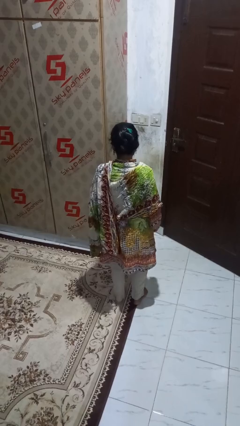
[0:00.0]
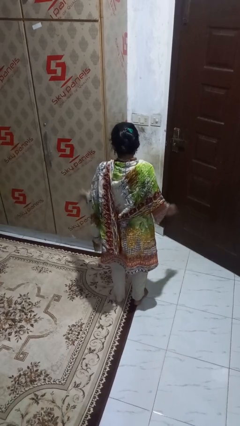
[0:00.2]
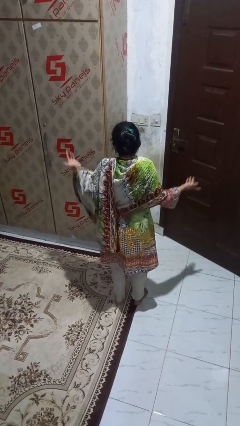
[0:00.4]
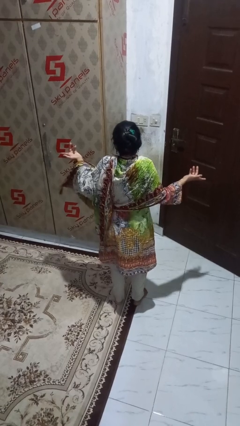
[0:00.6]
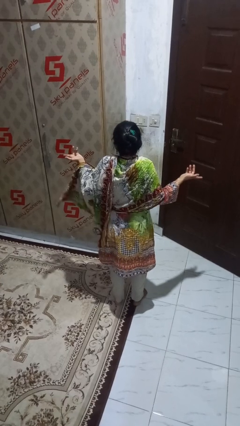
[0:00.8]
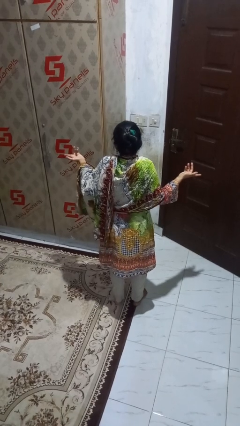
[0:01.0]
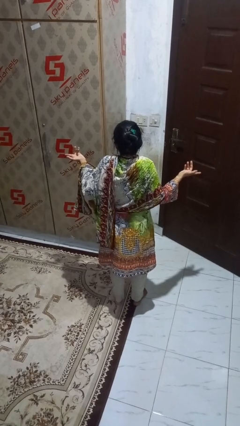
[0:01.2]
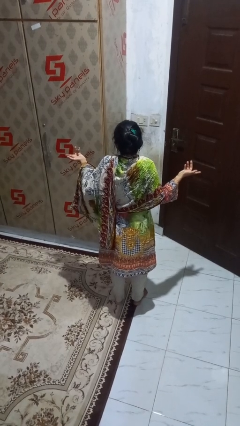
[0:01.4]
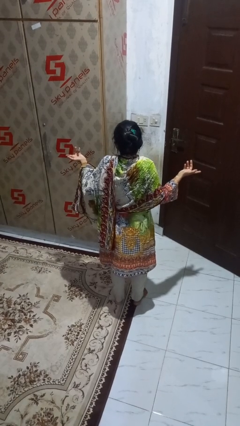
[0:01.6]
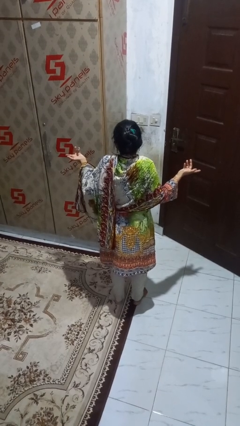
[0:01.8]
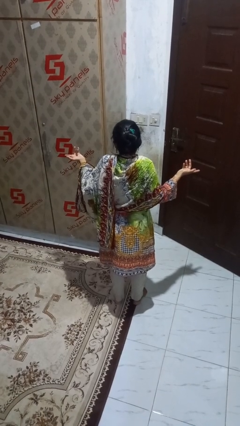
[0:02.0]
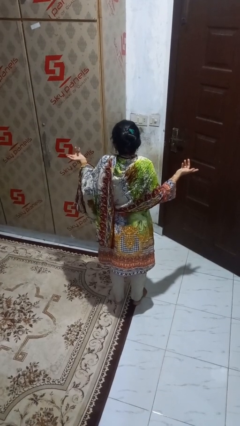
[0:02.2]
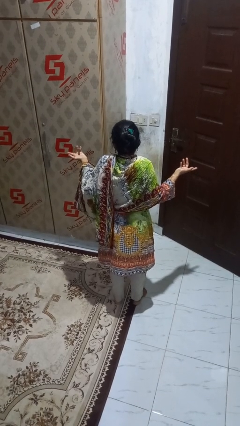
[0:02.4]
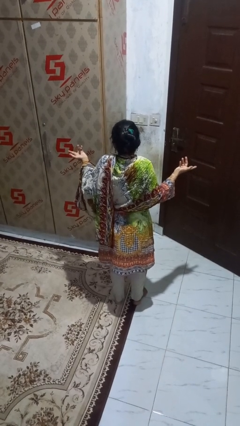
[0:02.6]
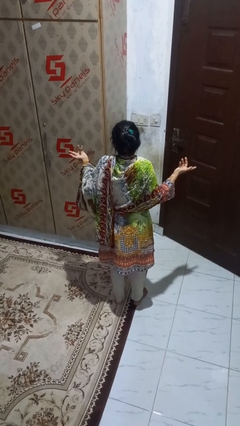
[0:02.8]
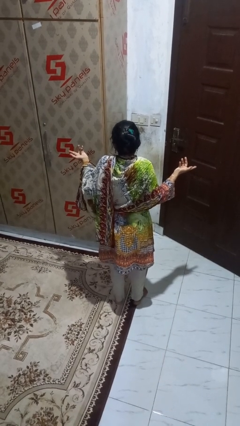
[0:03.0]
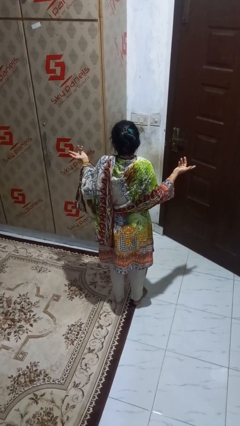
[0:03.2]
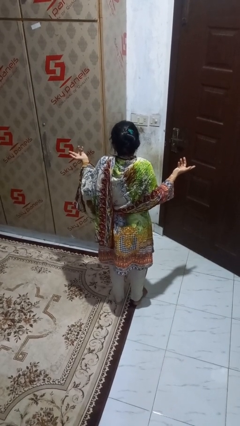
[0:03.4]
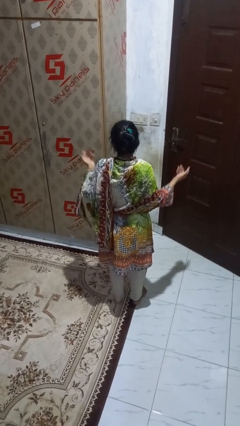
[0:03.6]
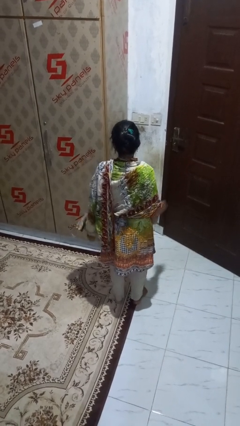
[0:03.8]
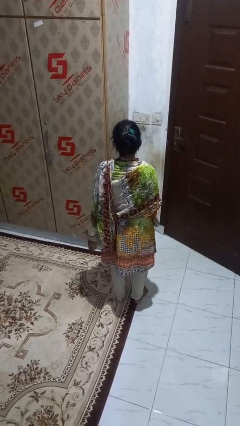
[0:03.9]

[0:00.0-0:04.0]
person shrugs

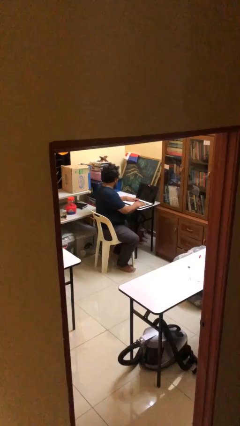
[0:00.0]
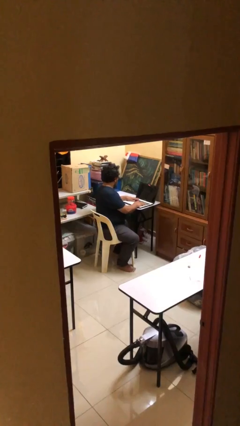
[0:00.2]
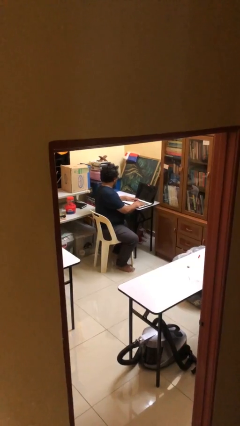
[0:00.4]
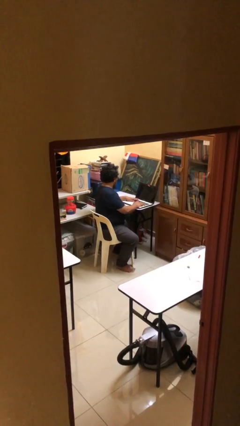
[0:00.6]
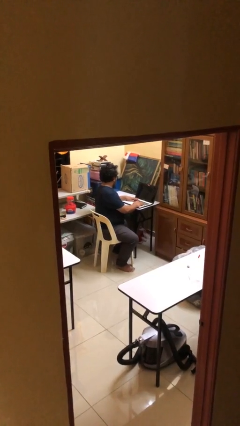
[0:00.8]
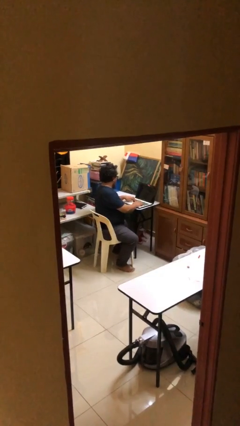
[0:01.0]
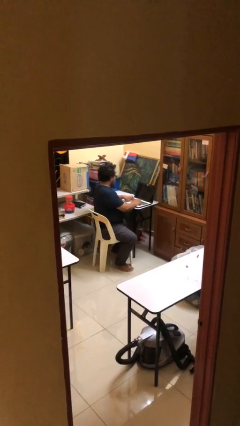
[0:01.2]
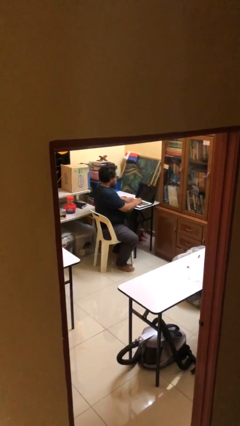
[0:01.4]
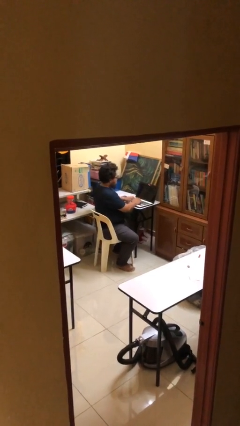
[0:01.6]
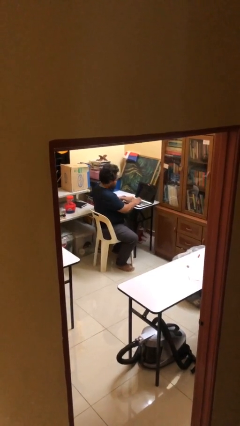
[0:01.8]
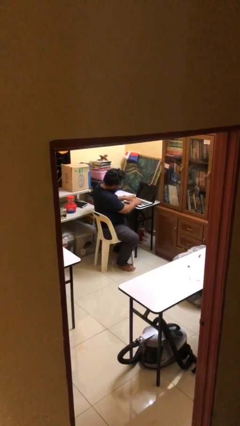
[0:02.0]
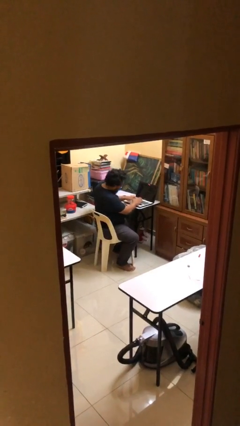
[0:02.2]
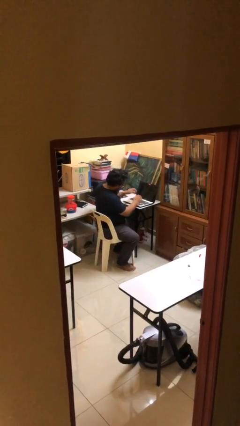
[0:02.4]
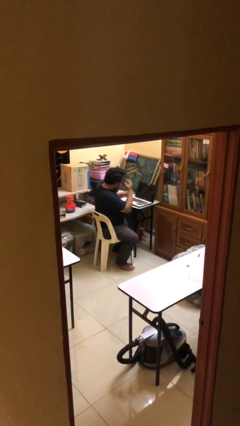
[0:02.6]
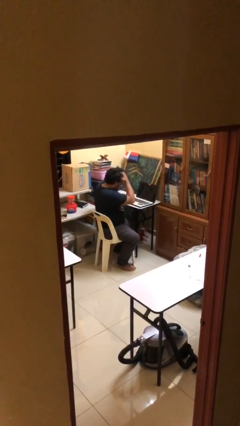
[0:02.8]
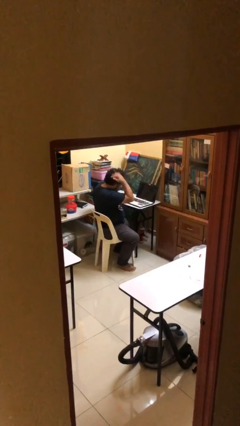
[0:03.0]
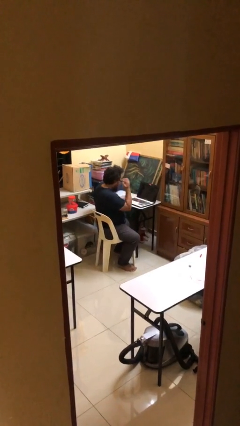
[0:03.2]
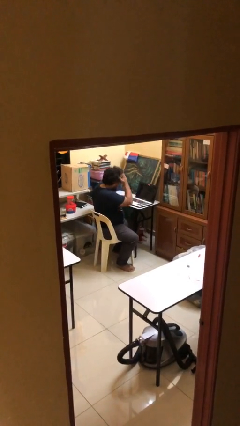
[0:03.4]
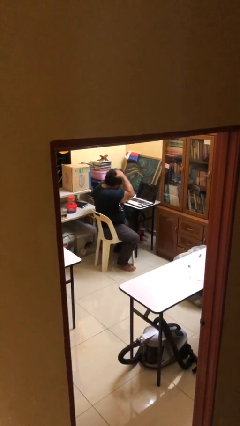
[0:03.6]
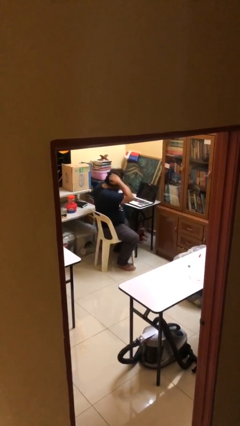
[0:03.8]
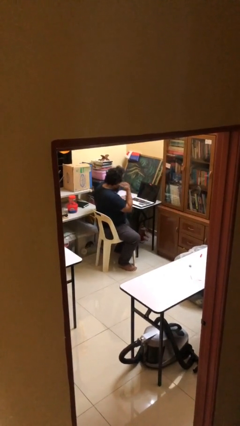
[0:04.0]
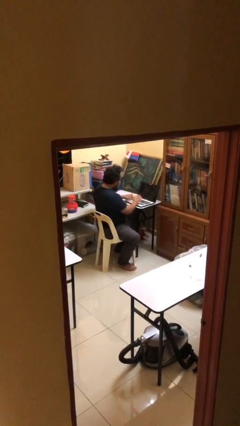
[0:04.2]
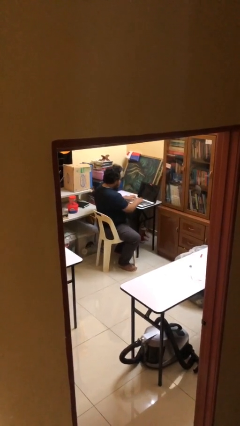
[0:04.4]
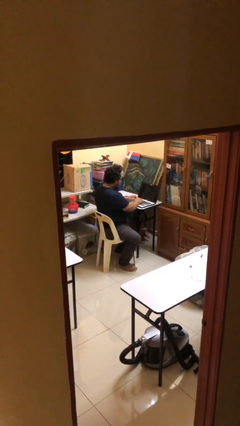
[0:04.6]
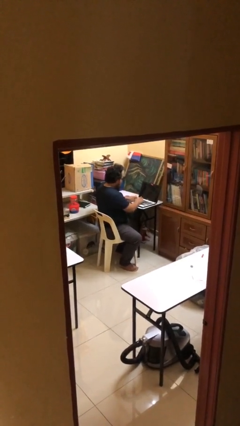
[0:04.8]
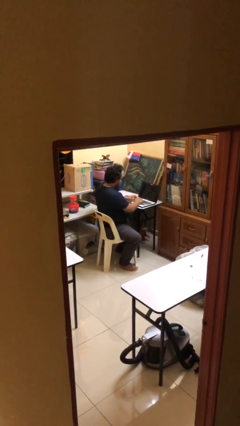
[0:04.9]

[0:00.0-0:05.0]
person interacts with laptop

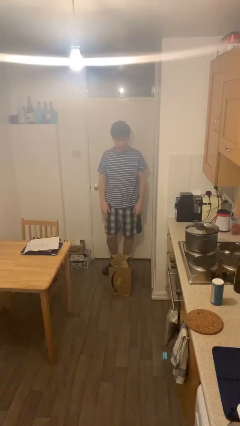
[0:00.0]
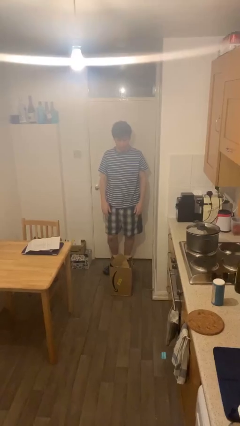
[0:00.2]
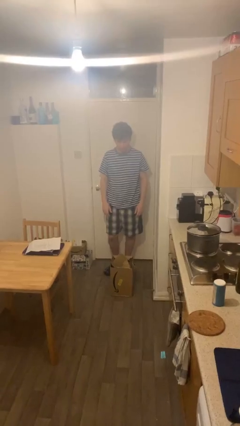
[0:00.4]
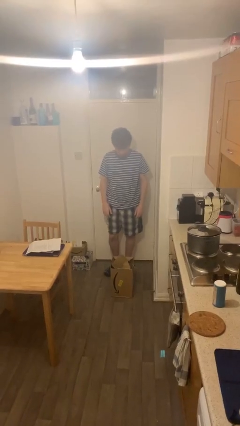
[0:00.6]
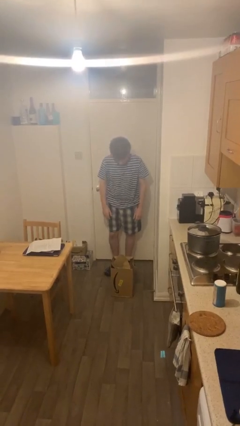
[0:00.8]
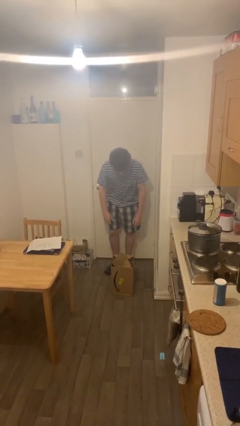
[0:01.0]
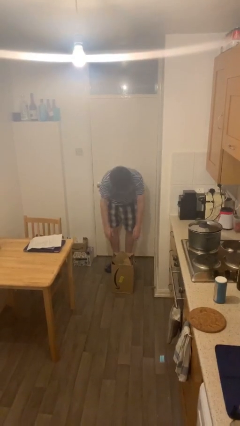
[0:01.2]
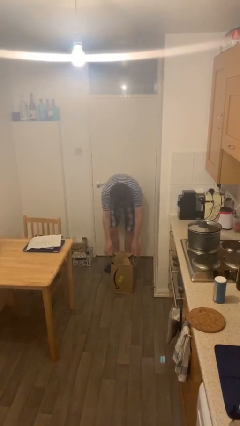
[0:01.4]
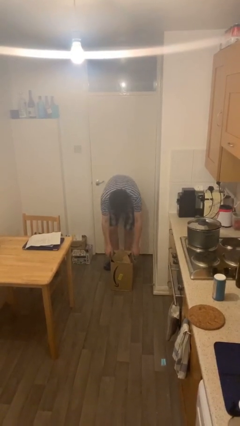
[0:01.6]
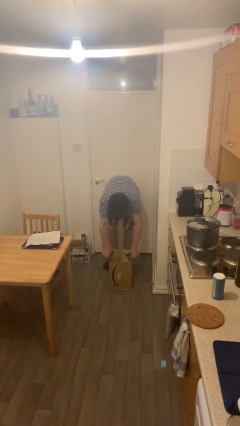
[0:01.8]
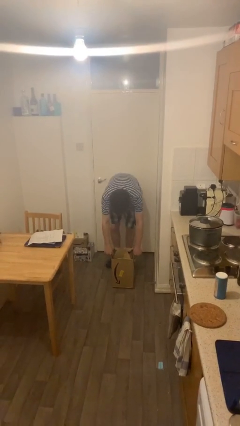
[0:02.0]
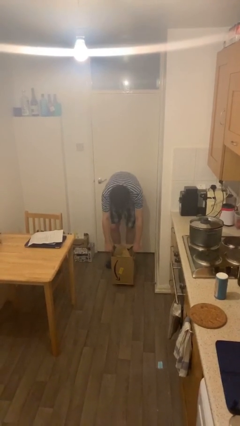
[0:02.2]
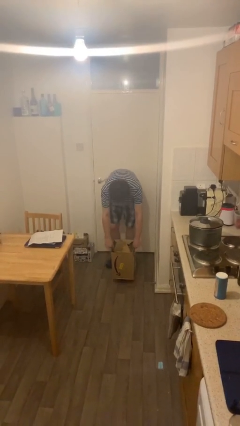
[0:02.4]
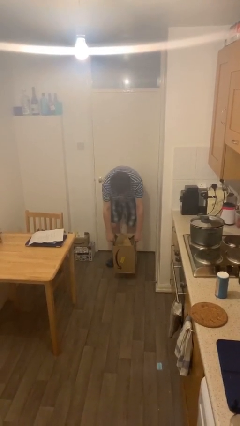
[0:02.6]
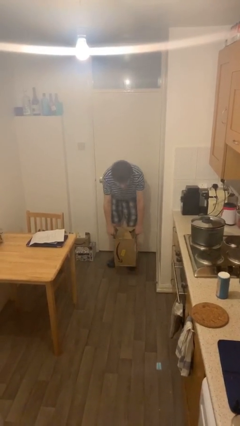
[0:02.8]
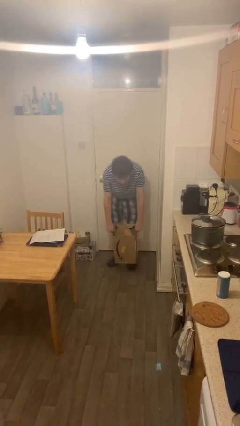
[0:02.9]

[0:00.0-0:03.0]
person picks up object from floor

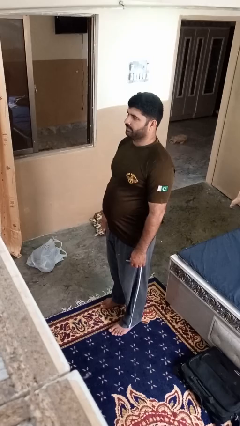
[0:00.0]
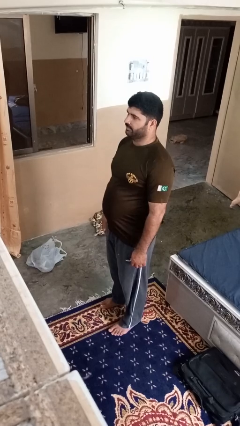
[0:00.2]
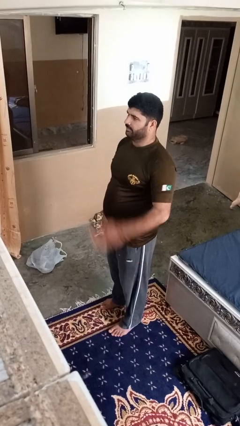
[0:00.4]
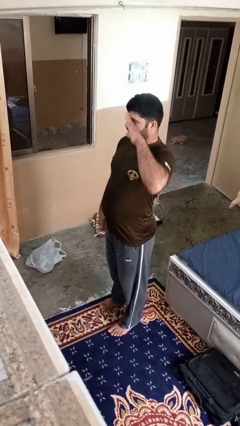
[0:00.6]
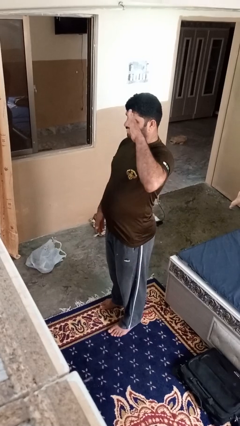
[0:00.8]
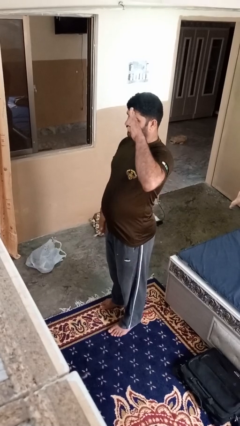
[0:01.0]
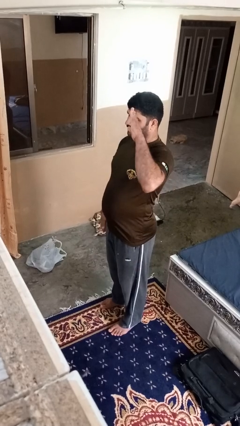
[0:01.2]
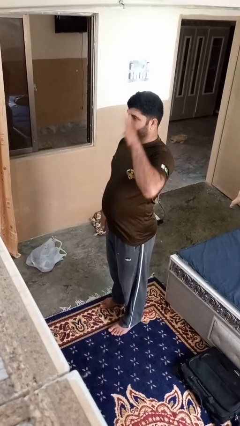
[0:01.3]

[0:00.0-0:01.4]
person salutes

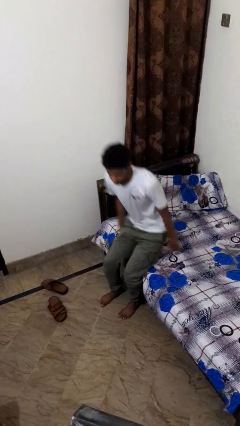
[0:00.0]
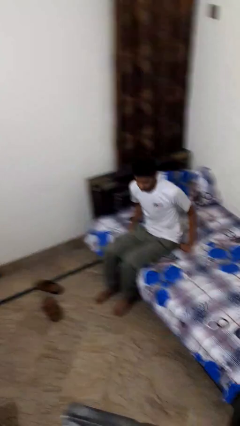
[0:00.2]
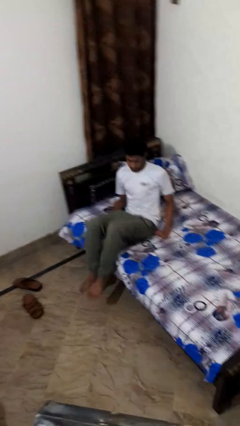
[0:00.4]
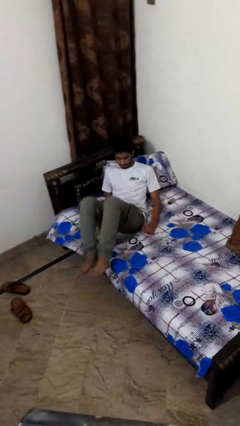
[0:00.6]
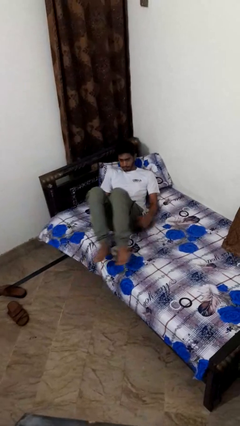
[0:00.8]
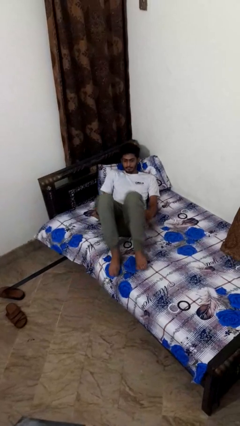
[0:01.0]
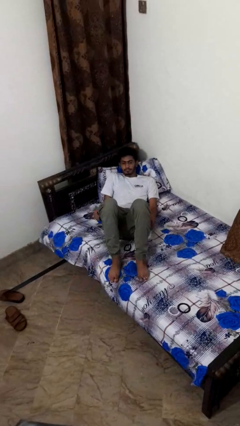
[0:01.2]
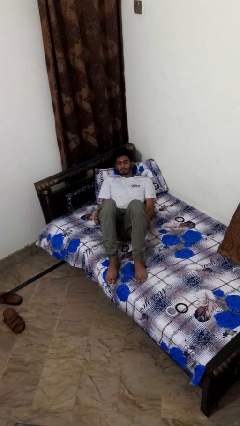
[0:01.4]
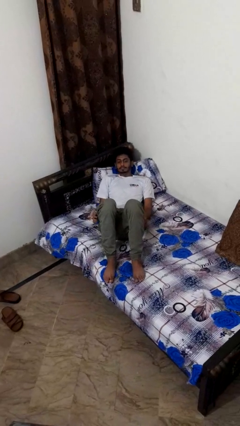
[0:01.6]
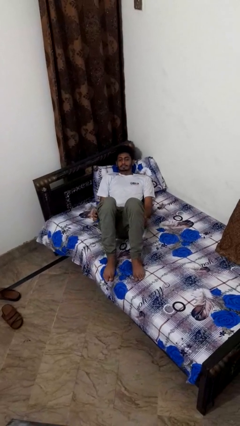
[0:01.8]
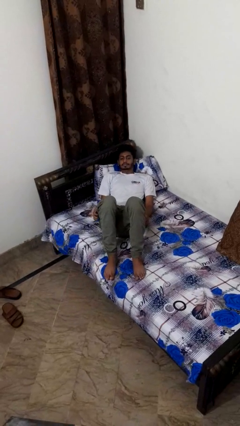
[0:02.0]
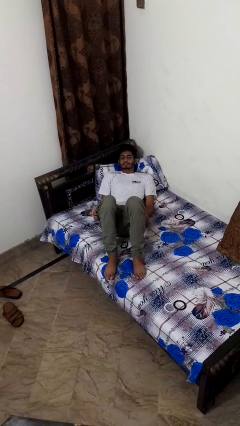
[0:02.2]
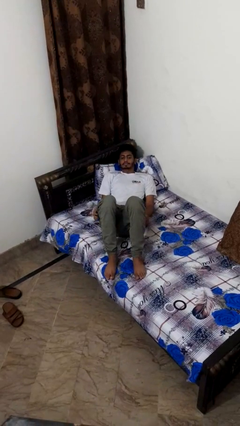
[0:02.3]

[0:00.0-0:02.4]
person lies down on bed

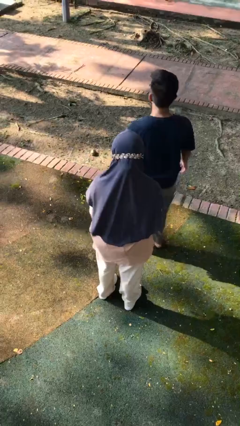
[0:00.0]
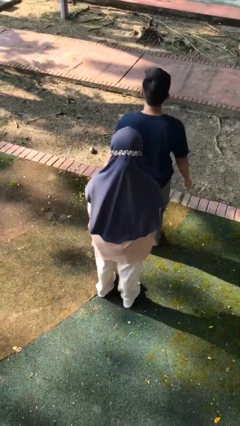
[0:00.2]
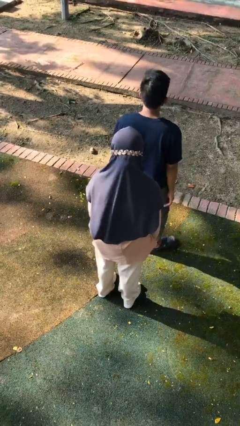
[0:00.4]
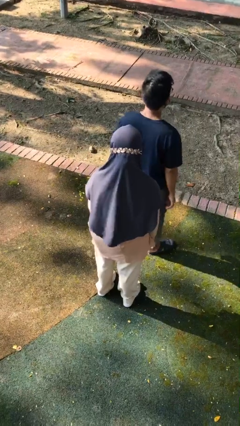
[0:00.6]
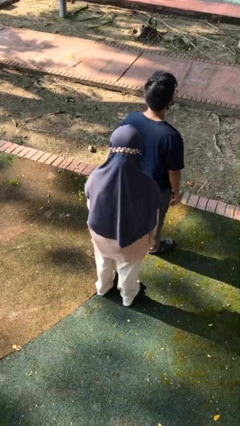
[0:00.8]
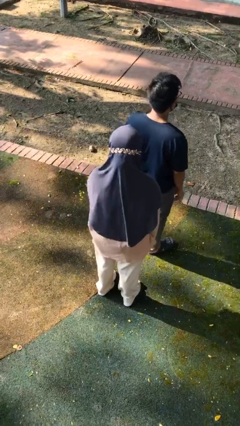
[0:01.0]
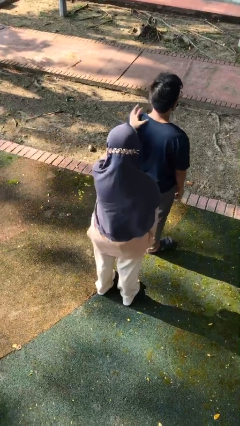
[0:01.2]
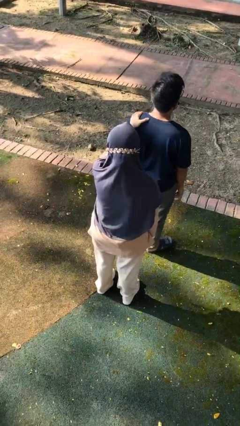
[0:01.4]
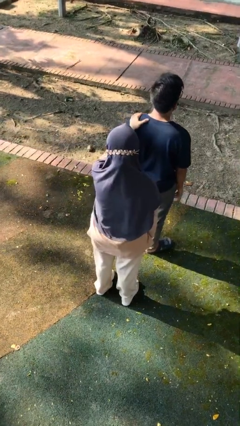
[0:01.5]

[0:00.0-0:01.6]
person grabs person by shoulder
